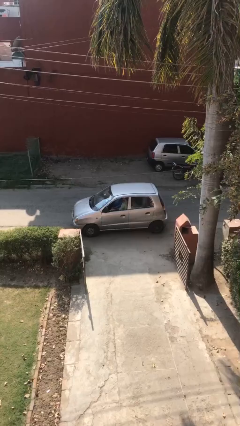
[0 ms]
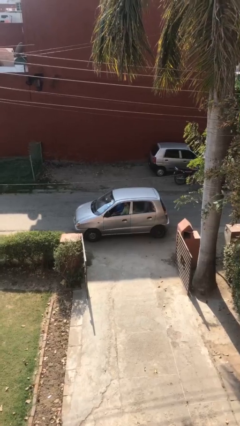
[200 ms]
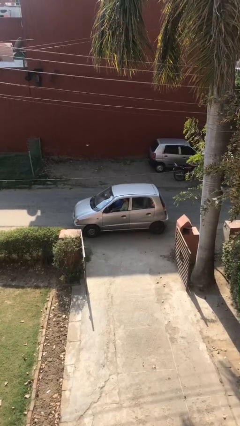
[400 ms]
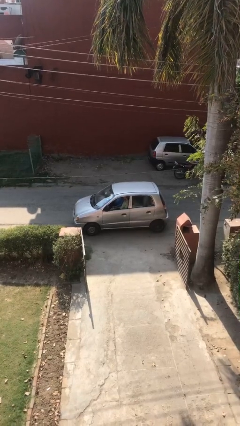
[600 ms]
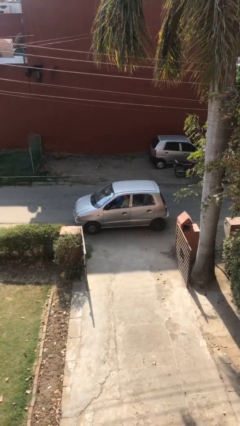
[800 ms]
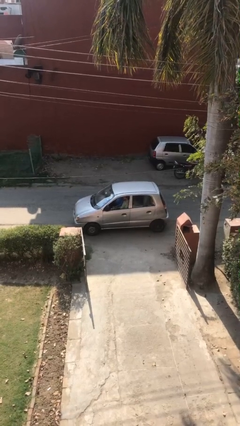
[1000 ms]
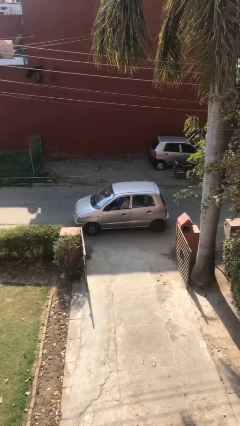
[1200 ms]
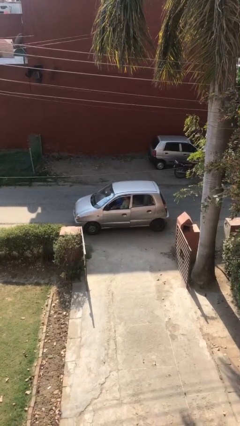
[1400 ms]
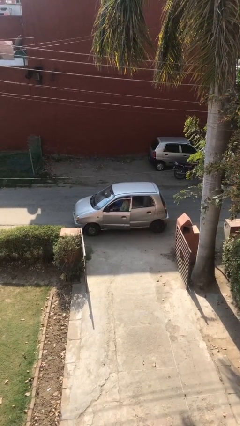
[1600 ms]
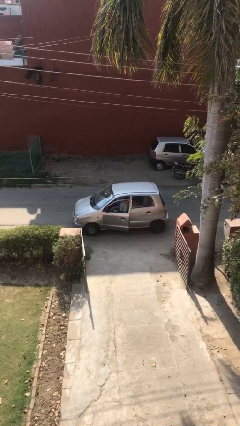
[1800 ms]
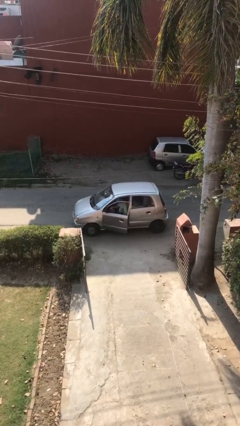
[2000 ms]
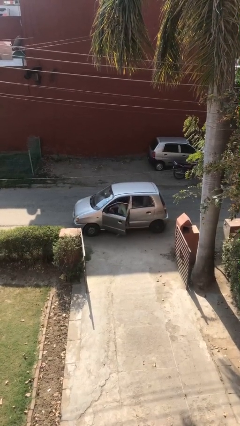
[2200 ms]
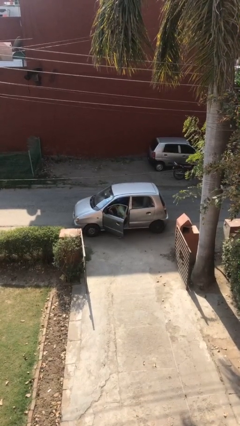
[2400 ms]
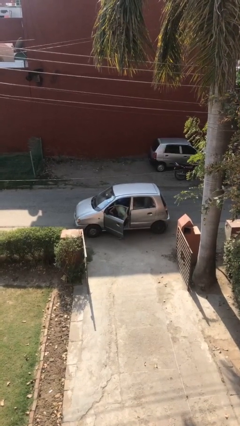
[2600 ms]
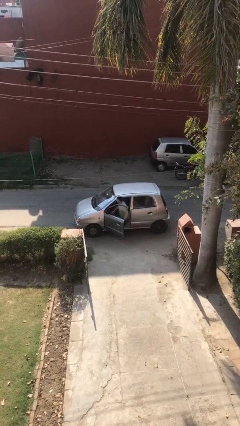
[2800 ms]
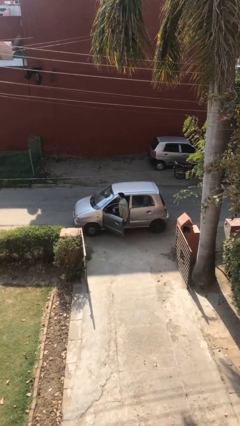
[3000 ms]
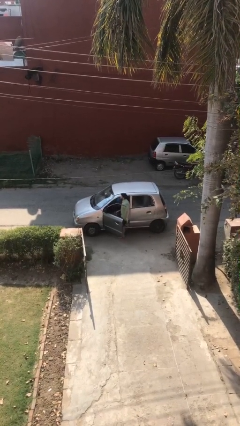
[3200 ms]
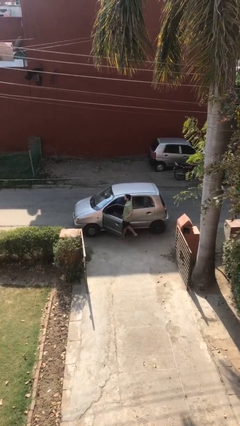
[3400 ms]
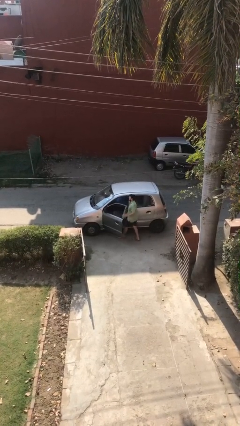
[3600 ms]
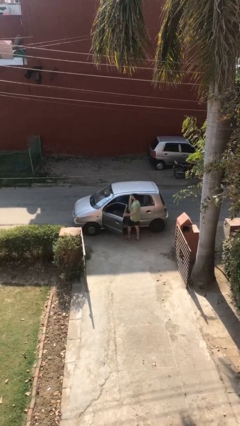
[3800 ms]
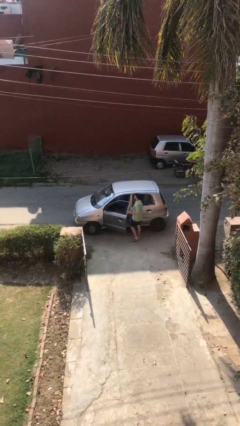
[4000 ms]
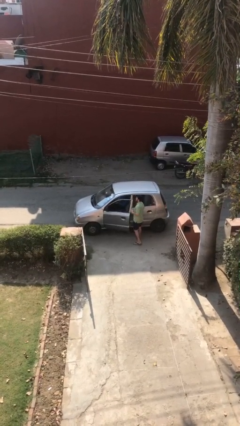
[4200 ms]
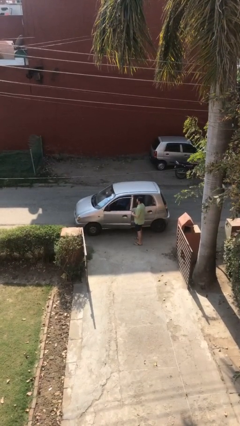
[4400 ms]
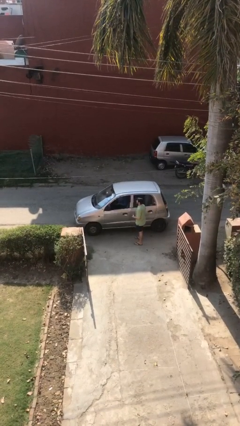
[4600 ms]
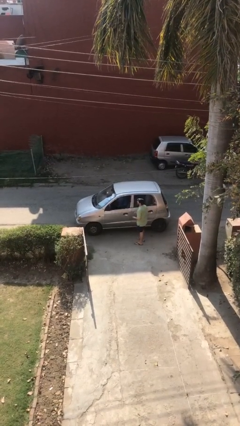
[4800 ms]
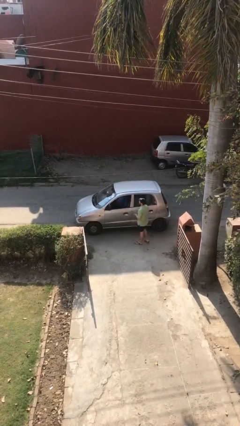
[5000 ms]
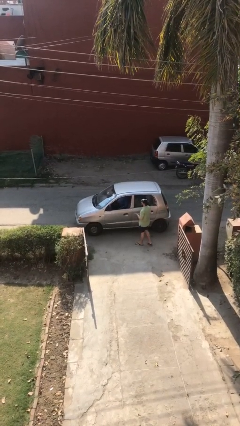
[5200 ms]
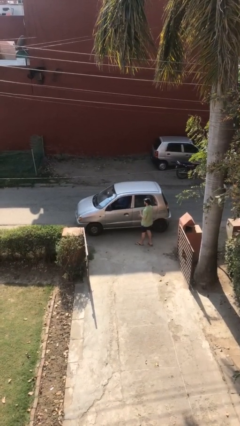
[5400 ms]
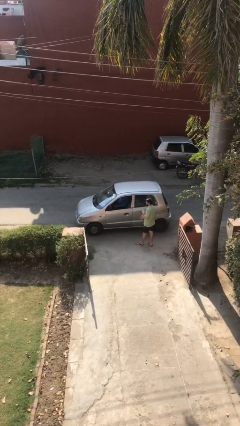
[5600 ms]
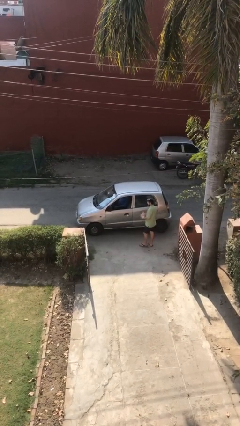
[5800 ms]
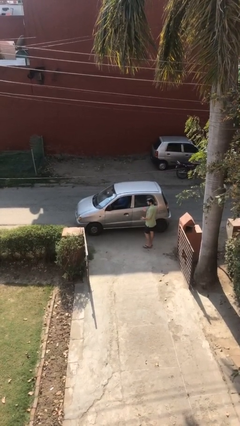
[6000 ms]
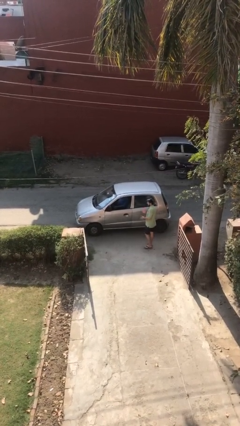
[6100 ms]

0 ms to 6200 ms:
car drops off person

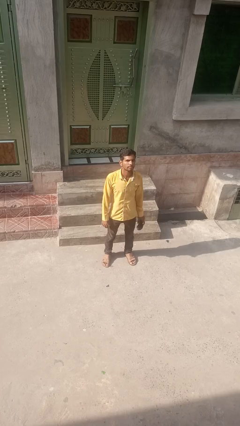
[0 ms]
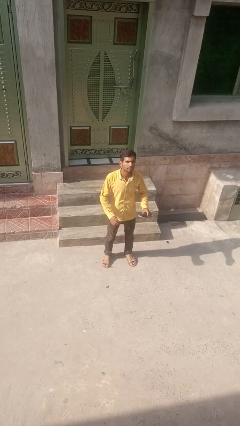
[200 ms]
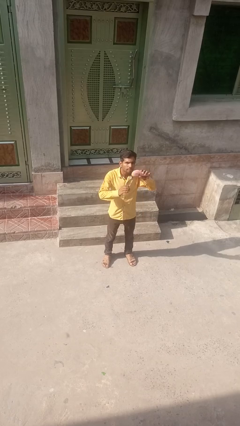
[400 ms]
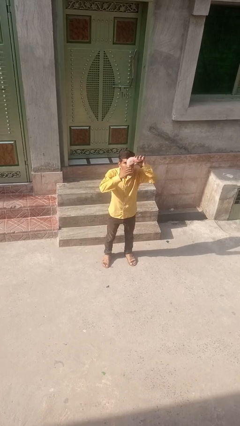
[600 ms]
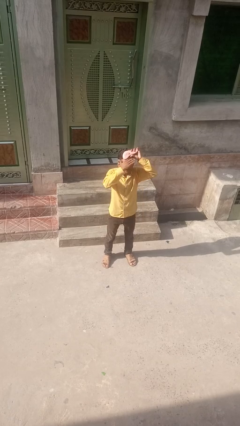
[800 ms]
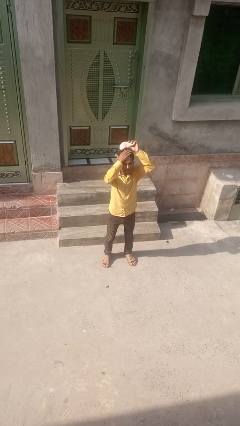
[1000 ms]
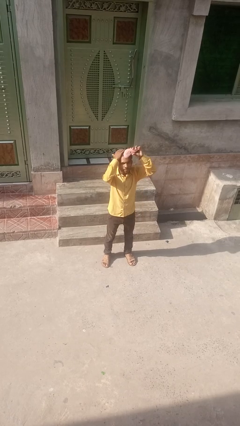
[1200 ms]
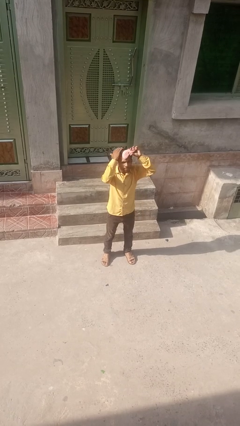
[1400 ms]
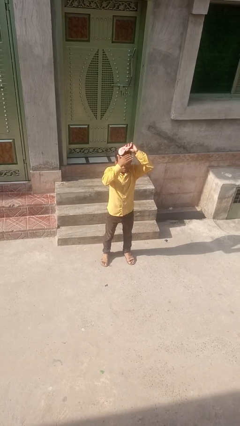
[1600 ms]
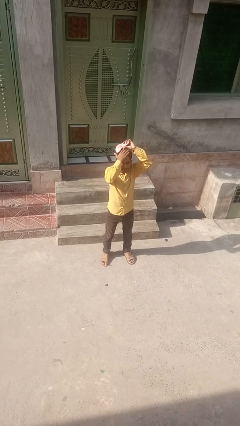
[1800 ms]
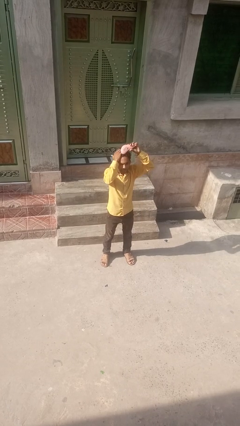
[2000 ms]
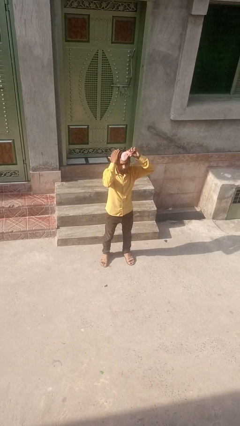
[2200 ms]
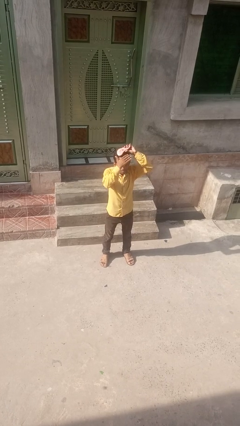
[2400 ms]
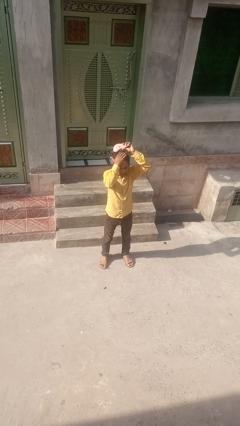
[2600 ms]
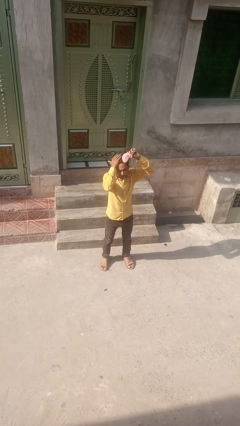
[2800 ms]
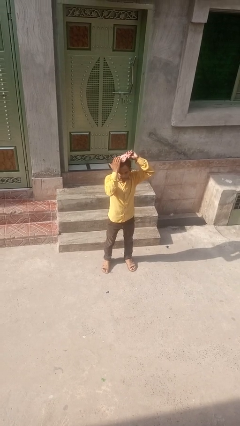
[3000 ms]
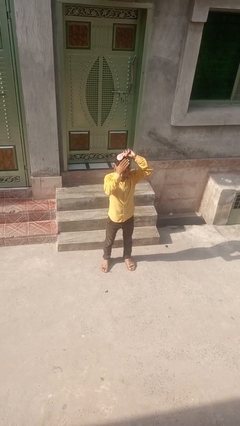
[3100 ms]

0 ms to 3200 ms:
person brushes hair

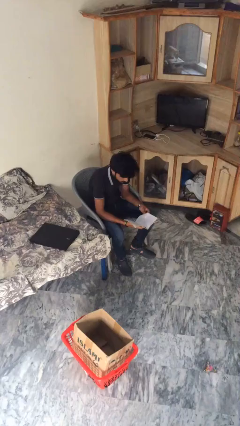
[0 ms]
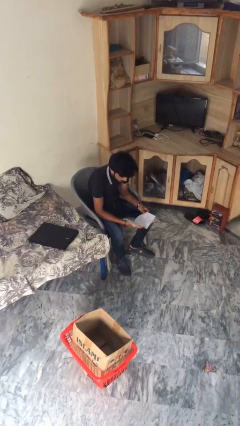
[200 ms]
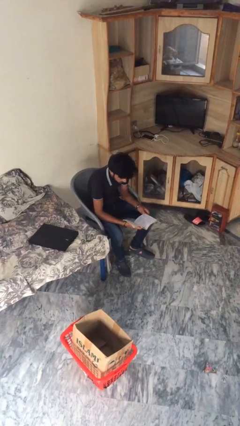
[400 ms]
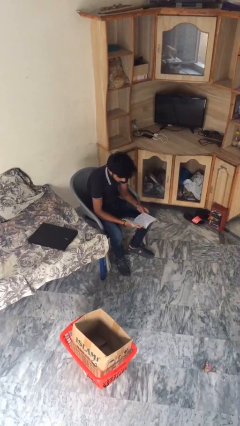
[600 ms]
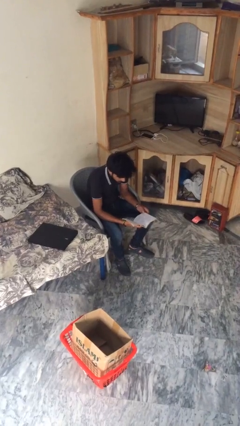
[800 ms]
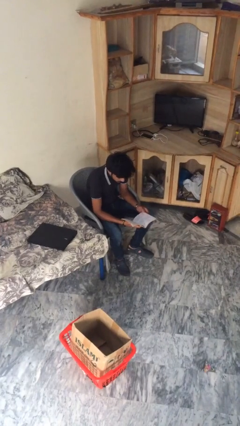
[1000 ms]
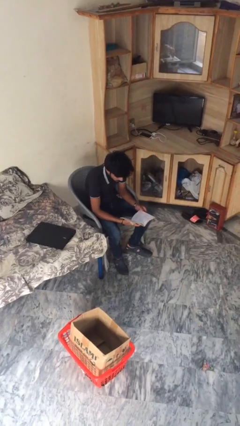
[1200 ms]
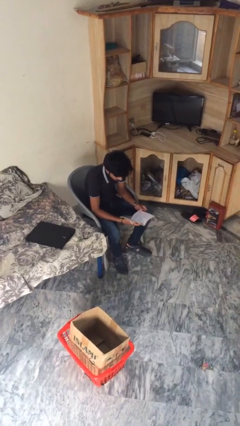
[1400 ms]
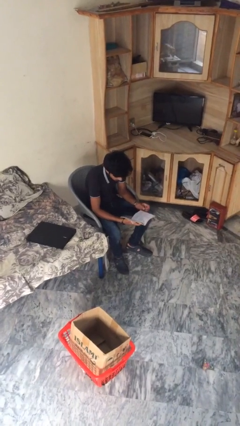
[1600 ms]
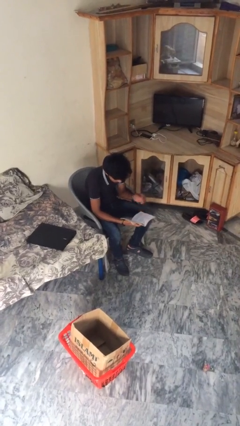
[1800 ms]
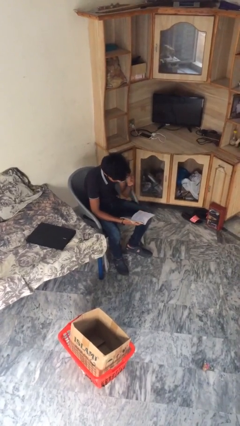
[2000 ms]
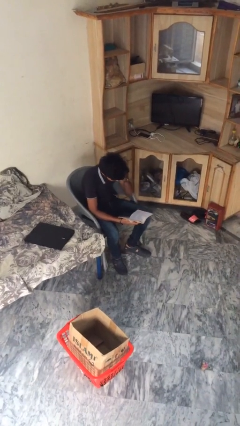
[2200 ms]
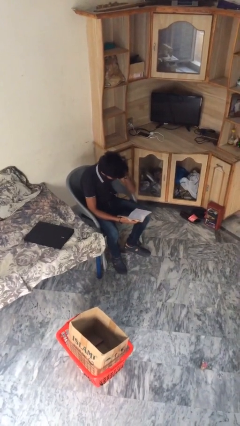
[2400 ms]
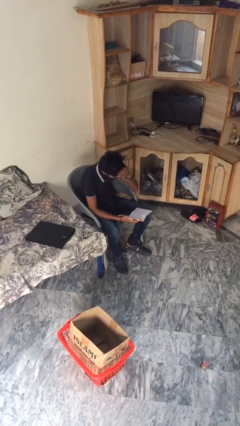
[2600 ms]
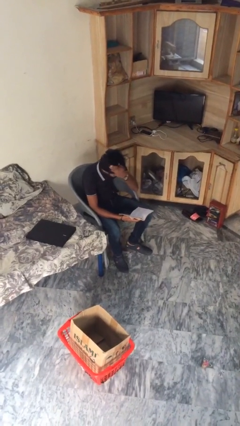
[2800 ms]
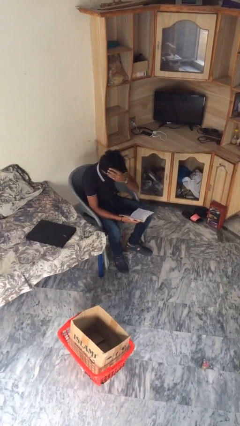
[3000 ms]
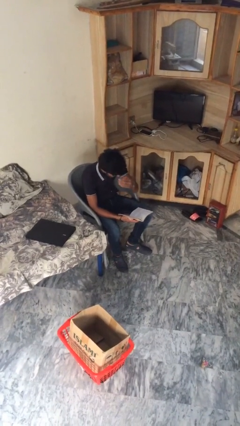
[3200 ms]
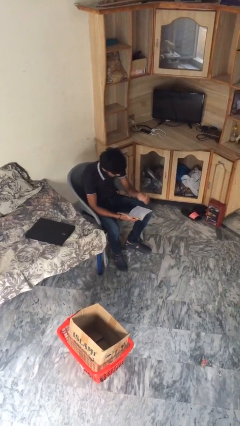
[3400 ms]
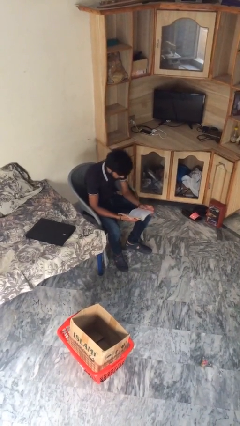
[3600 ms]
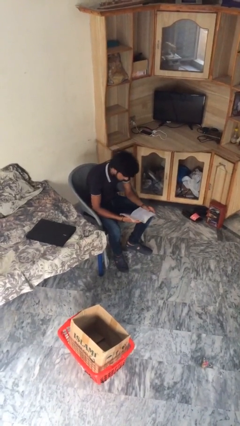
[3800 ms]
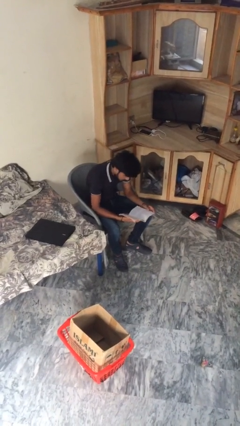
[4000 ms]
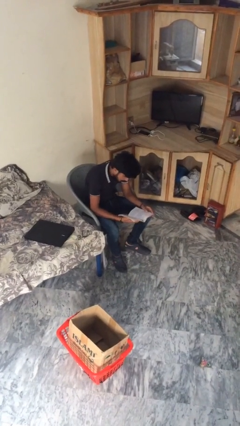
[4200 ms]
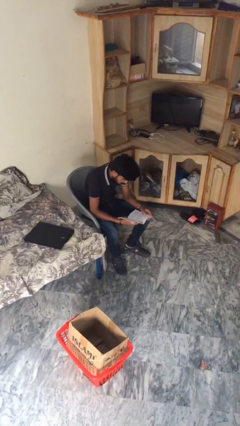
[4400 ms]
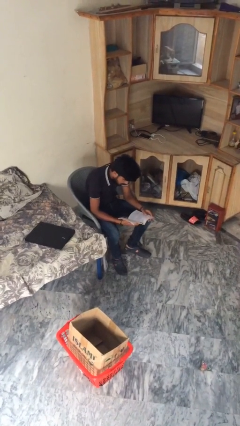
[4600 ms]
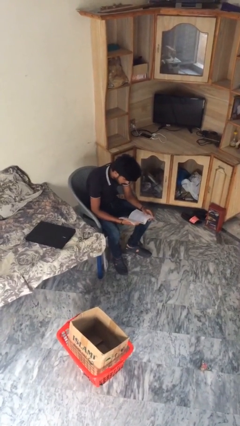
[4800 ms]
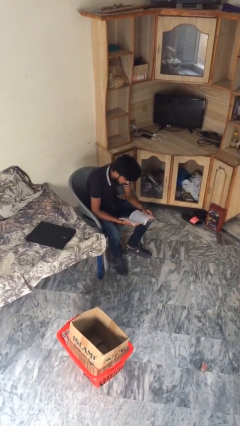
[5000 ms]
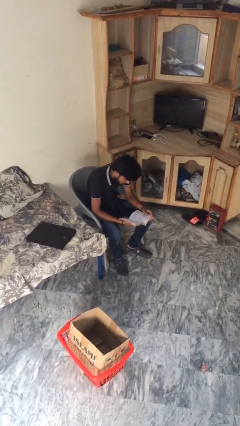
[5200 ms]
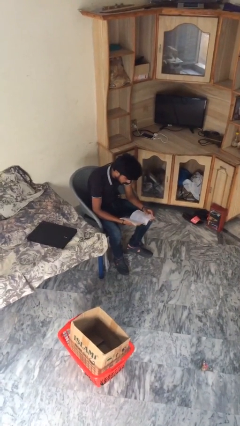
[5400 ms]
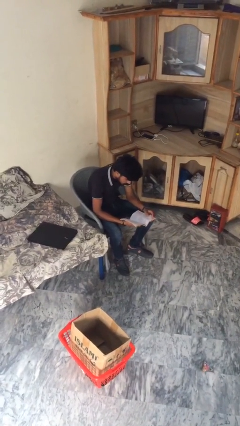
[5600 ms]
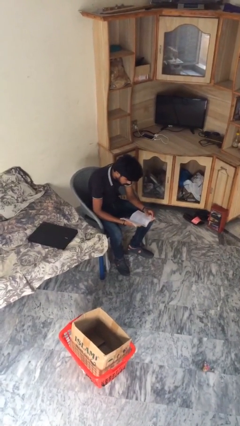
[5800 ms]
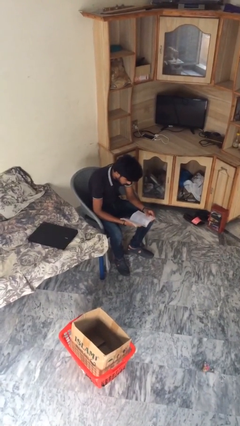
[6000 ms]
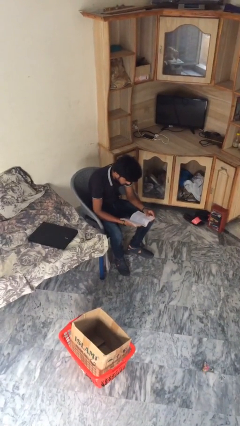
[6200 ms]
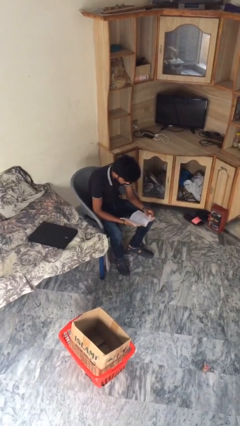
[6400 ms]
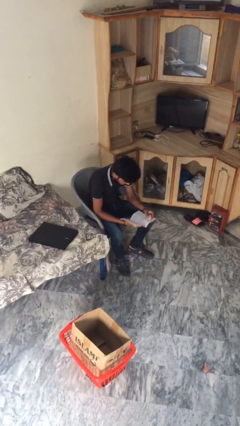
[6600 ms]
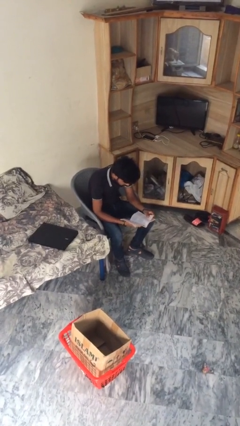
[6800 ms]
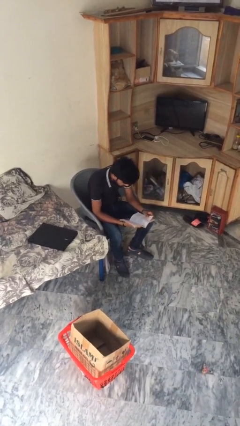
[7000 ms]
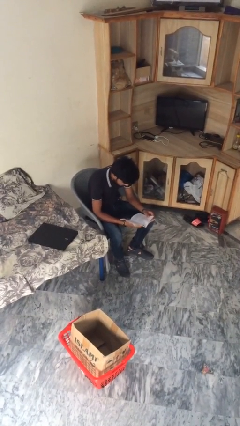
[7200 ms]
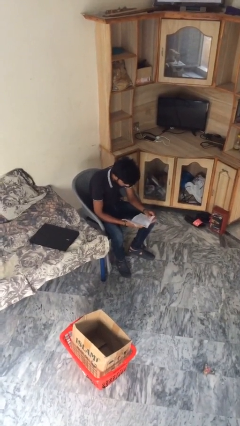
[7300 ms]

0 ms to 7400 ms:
person reads document

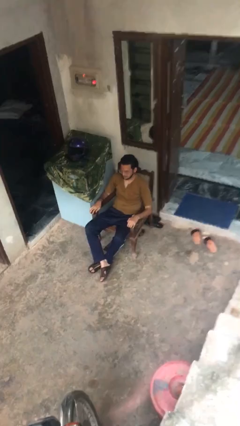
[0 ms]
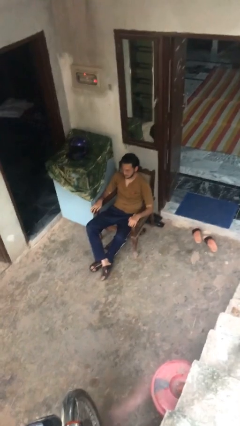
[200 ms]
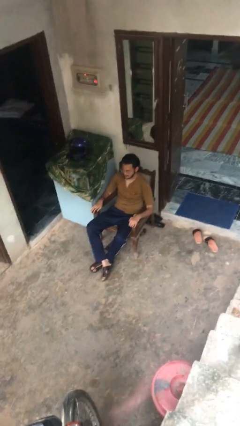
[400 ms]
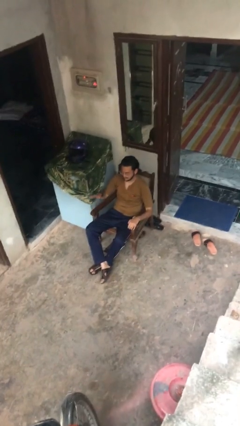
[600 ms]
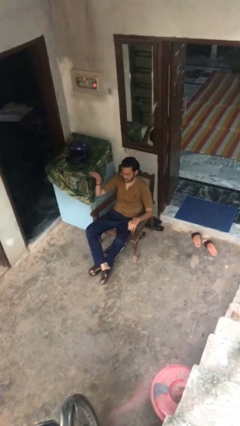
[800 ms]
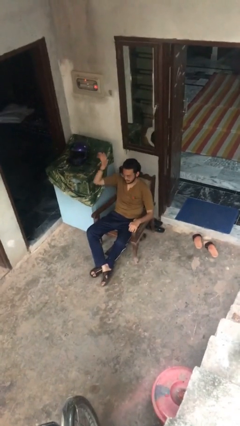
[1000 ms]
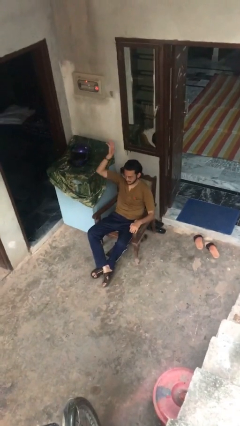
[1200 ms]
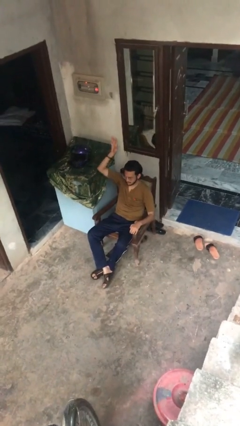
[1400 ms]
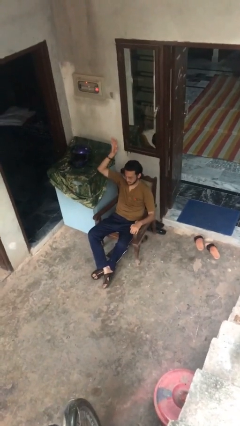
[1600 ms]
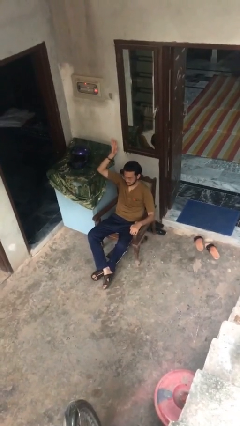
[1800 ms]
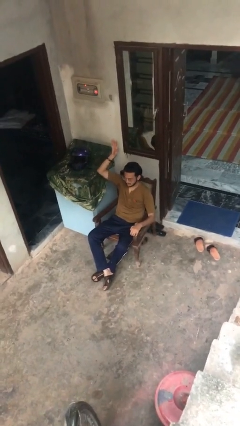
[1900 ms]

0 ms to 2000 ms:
person gestures raise hand
